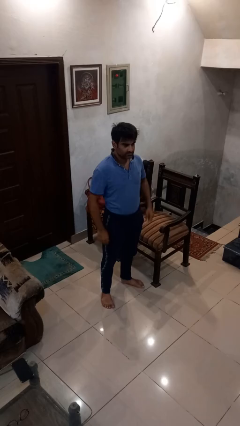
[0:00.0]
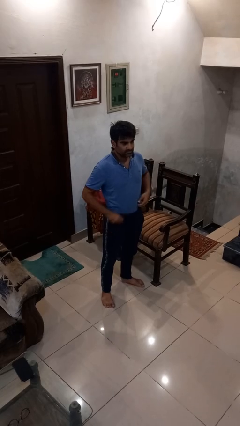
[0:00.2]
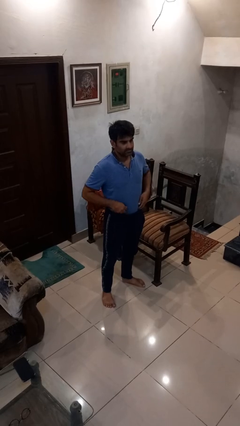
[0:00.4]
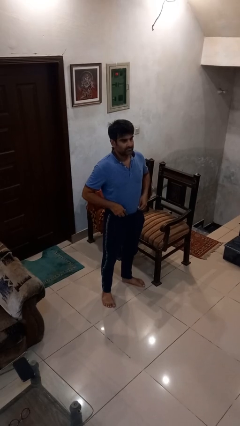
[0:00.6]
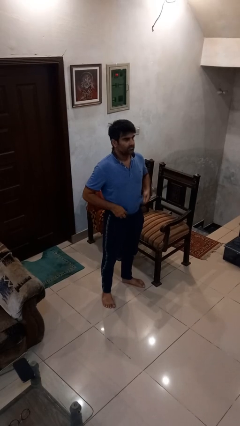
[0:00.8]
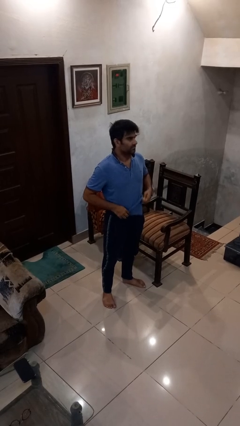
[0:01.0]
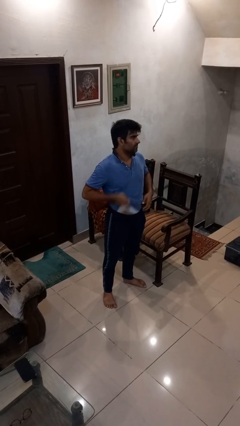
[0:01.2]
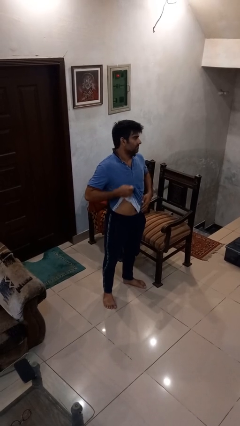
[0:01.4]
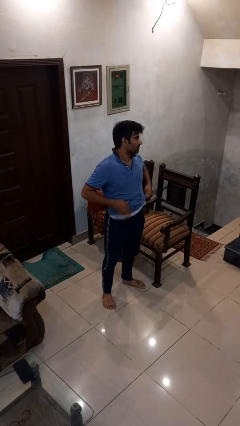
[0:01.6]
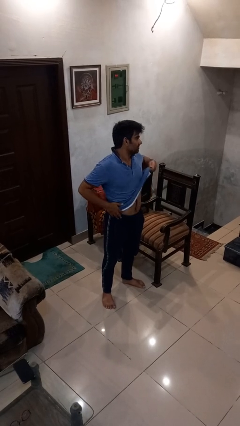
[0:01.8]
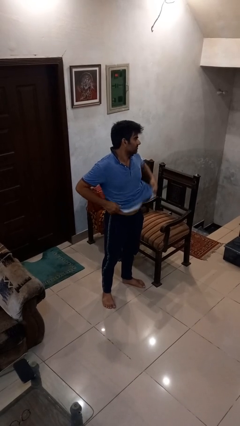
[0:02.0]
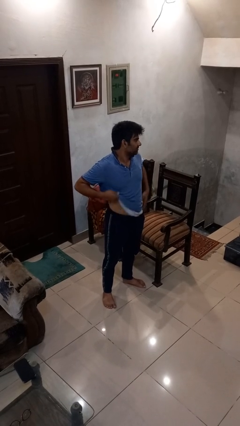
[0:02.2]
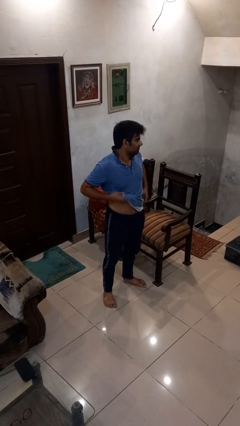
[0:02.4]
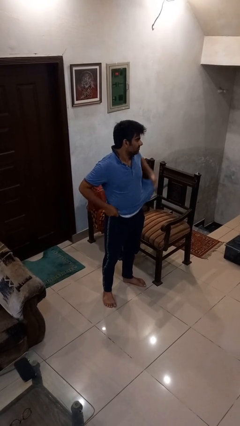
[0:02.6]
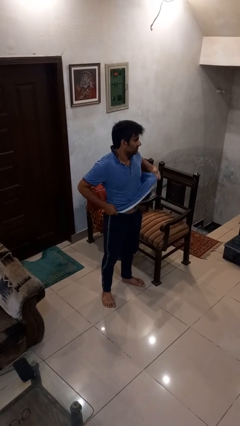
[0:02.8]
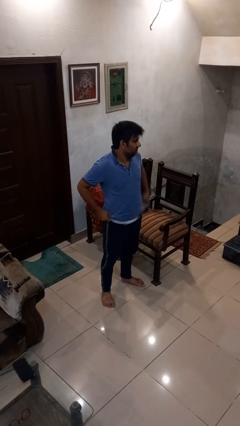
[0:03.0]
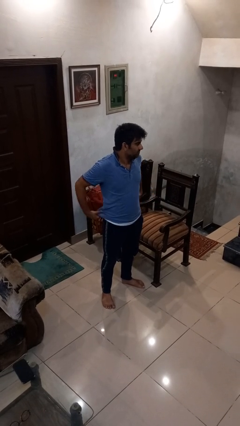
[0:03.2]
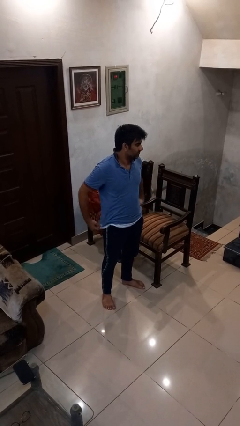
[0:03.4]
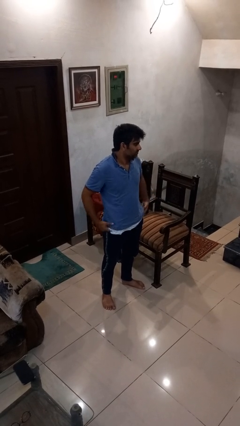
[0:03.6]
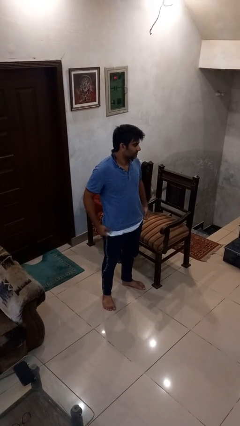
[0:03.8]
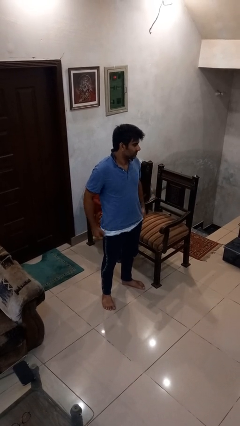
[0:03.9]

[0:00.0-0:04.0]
person untucks shirt

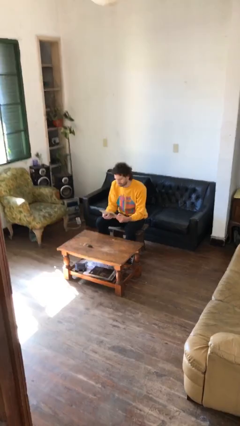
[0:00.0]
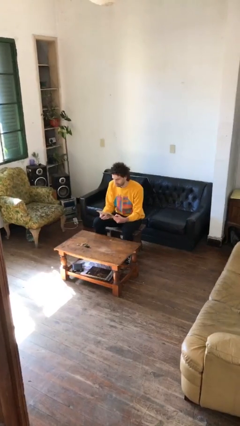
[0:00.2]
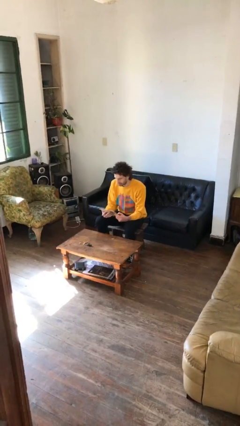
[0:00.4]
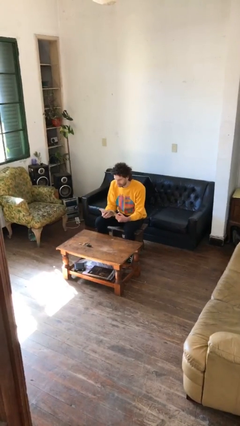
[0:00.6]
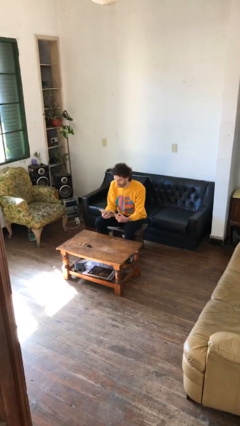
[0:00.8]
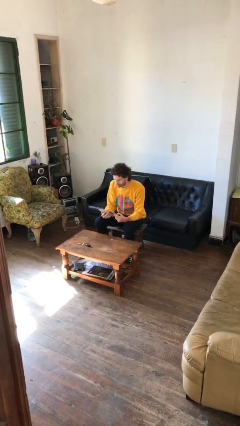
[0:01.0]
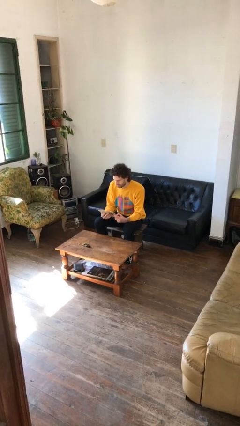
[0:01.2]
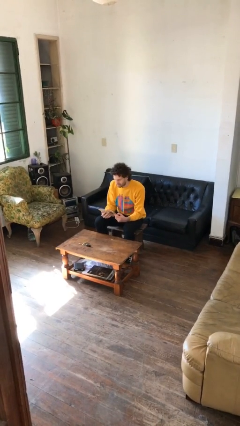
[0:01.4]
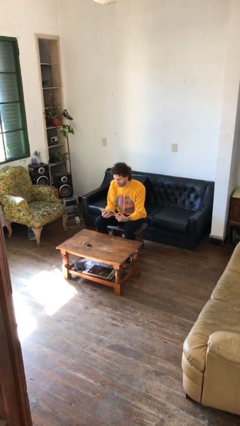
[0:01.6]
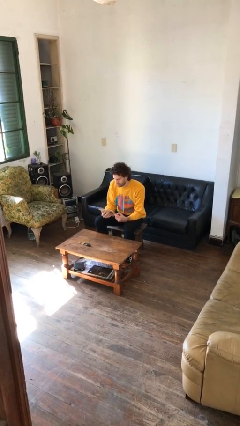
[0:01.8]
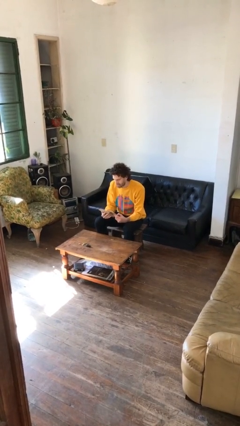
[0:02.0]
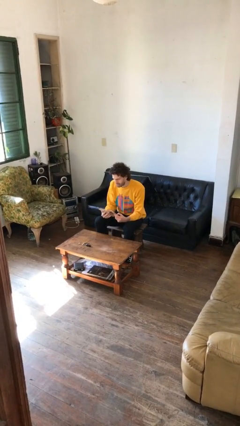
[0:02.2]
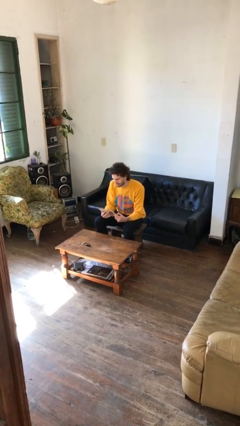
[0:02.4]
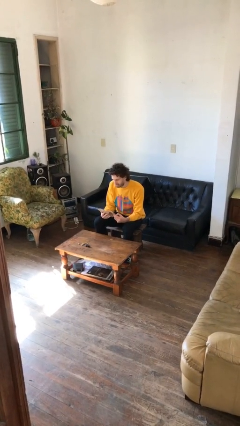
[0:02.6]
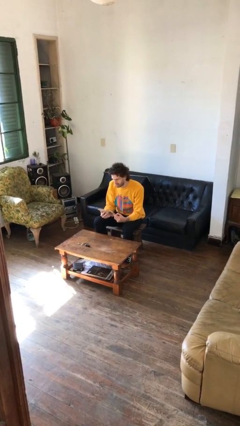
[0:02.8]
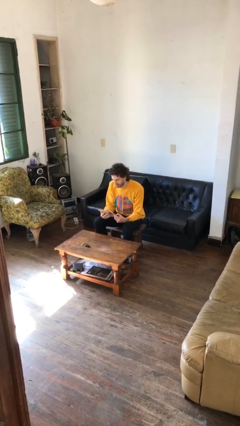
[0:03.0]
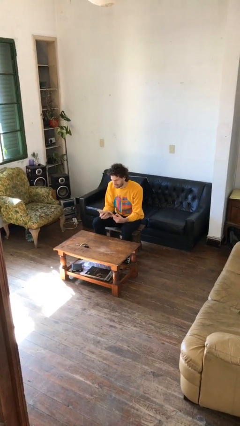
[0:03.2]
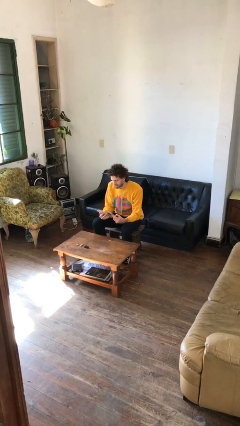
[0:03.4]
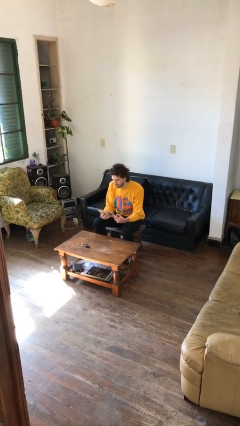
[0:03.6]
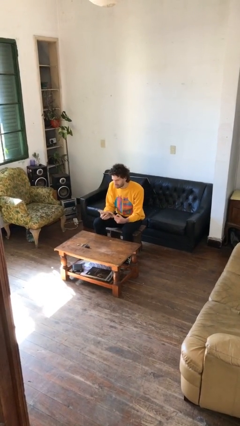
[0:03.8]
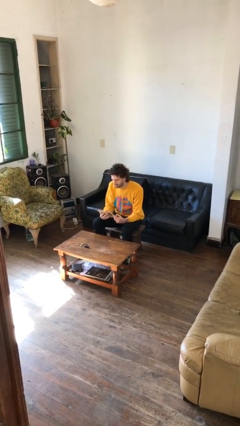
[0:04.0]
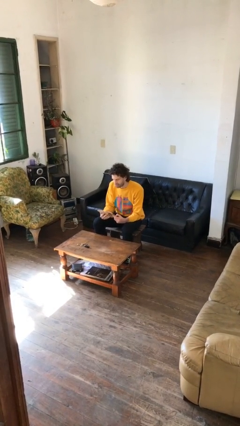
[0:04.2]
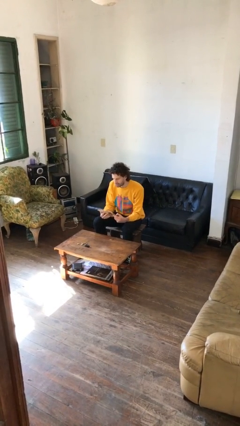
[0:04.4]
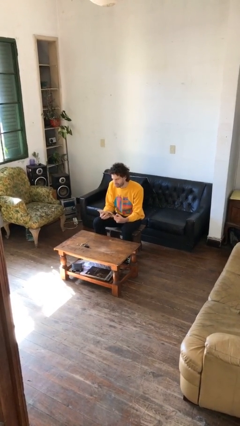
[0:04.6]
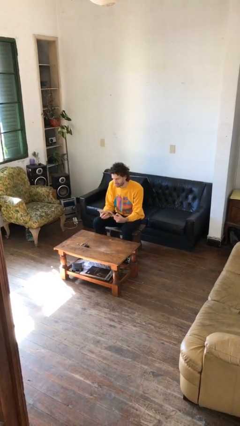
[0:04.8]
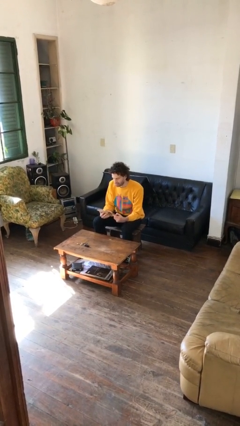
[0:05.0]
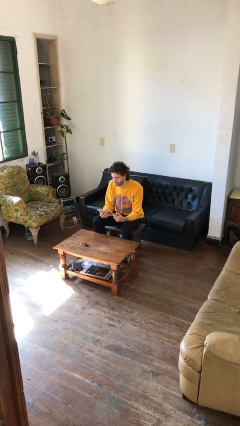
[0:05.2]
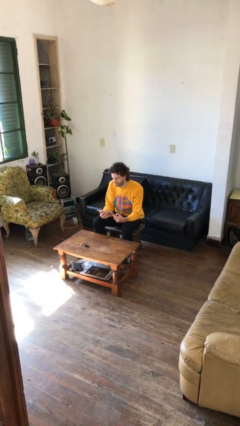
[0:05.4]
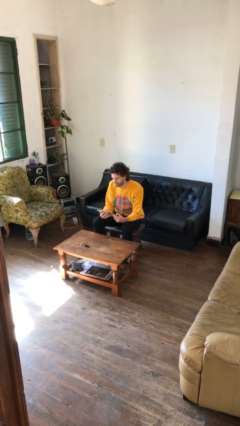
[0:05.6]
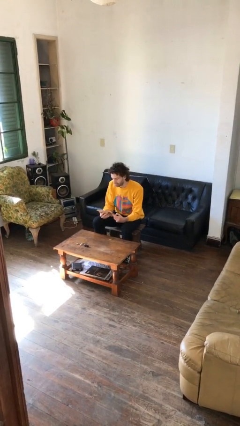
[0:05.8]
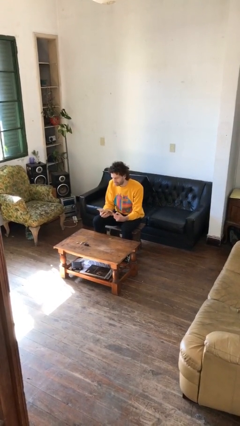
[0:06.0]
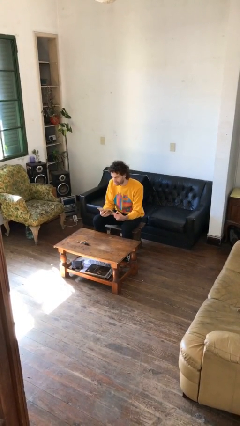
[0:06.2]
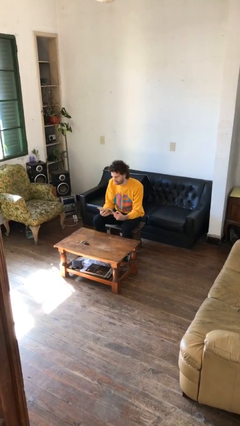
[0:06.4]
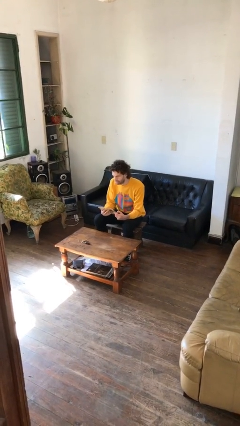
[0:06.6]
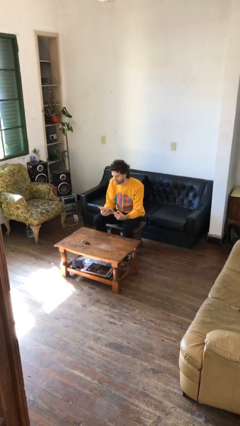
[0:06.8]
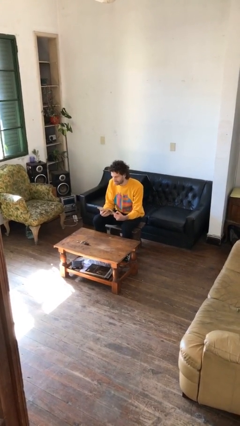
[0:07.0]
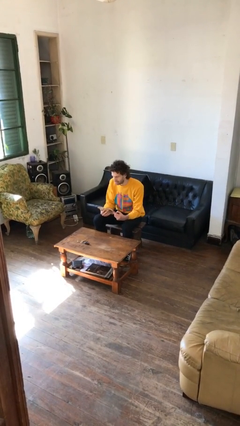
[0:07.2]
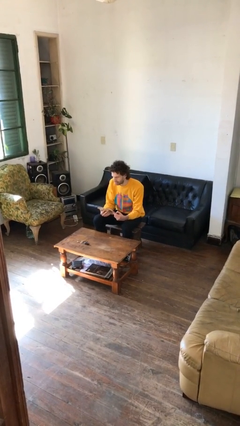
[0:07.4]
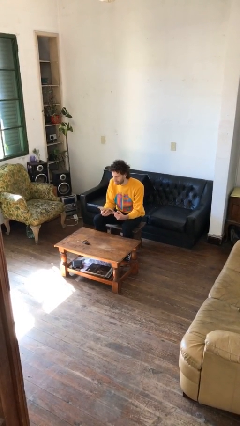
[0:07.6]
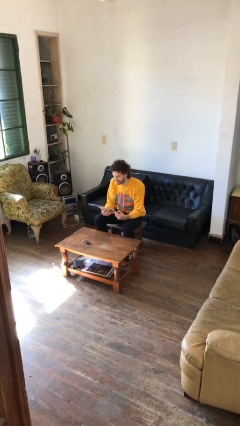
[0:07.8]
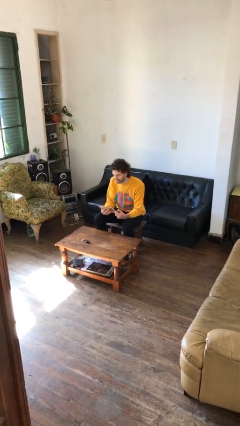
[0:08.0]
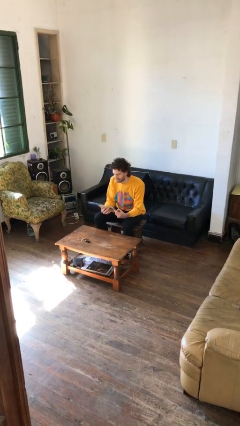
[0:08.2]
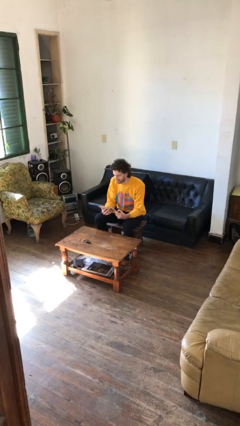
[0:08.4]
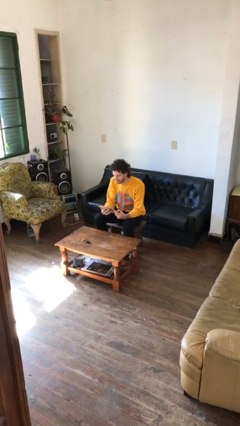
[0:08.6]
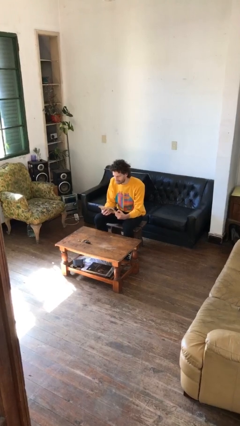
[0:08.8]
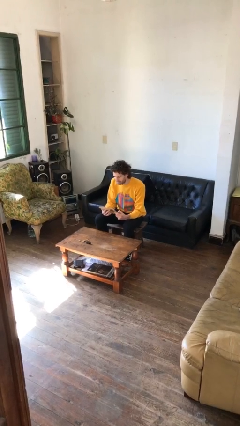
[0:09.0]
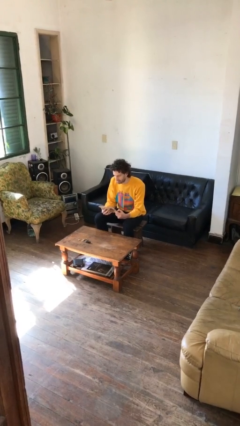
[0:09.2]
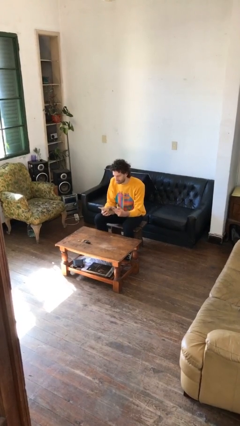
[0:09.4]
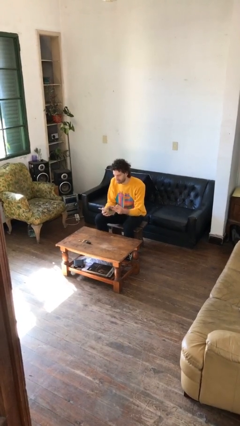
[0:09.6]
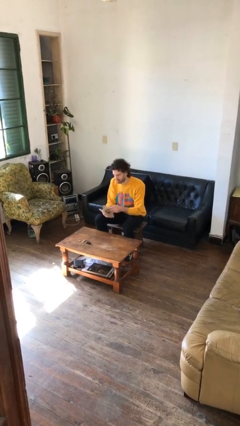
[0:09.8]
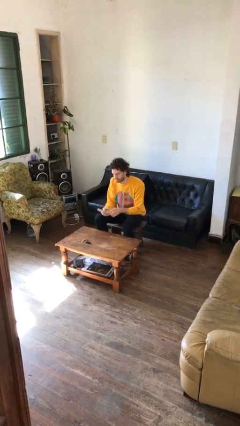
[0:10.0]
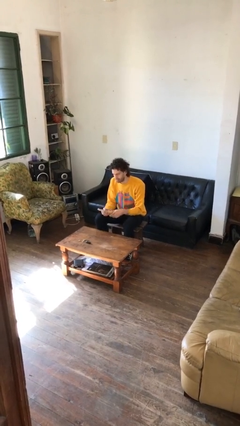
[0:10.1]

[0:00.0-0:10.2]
person reads document

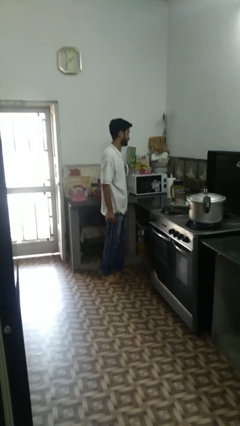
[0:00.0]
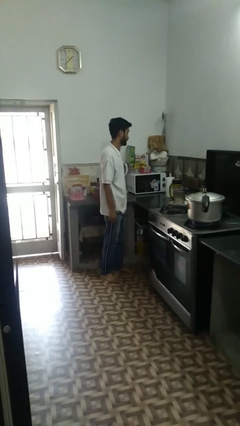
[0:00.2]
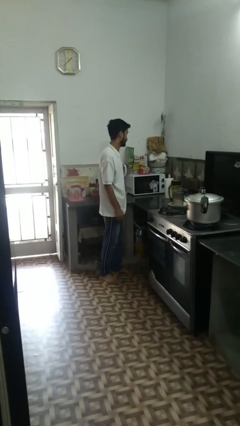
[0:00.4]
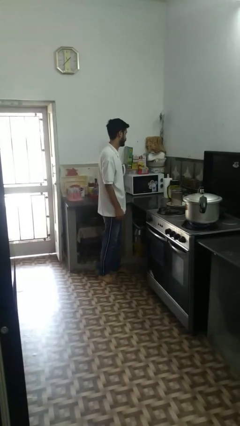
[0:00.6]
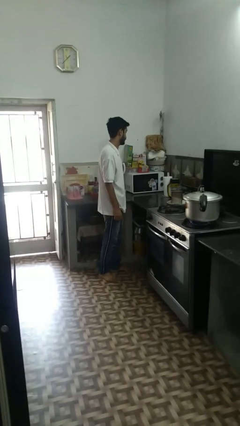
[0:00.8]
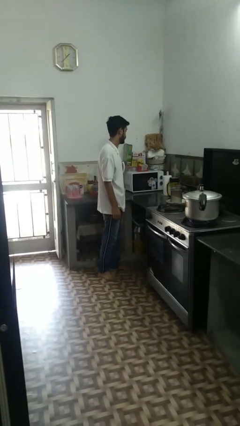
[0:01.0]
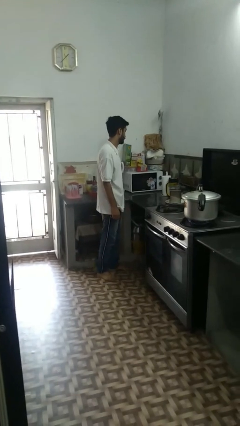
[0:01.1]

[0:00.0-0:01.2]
person closes microwave

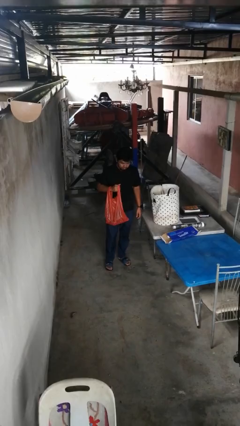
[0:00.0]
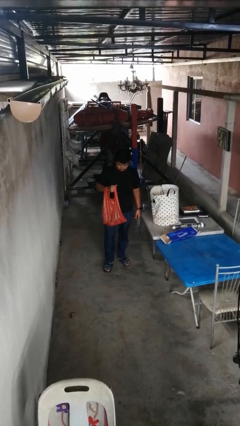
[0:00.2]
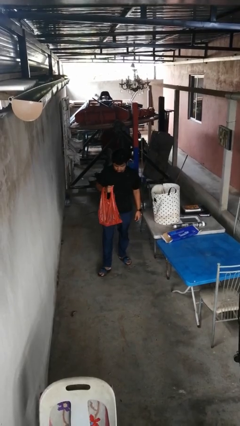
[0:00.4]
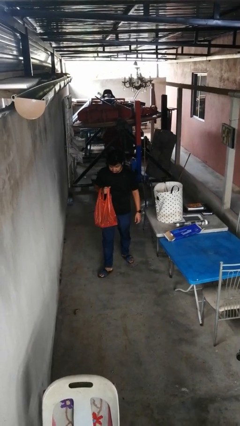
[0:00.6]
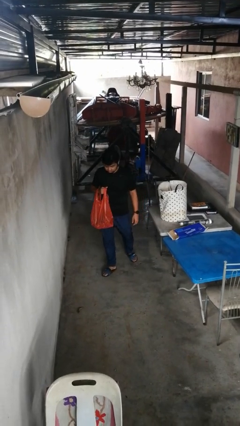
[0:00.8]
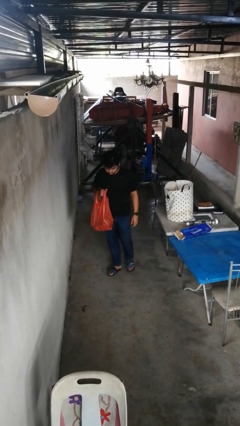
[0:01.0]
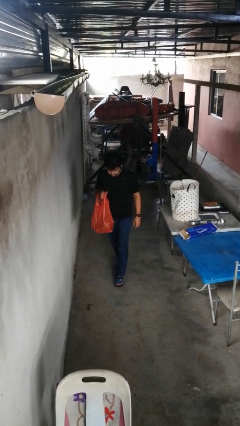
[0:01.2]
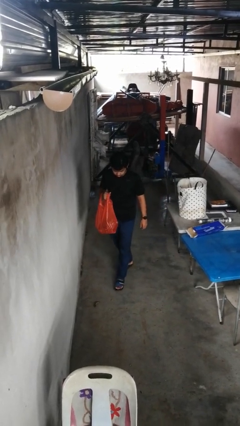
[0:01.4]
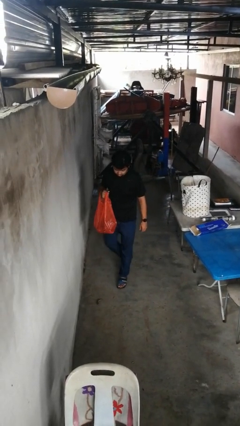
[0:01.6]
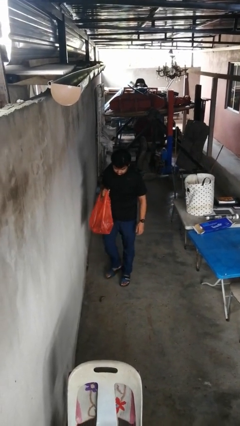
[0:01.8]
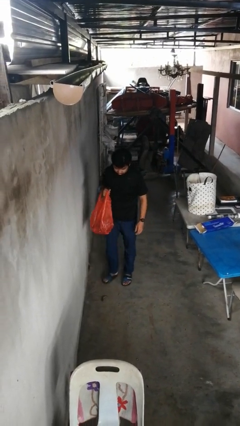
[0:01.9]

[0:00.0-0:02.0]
person carries groceries

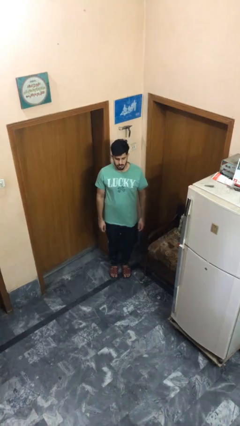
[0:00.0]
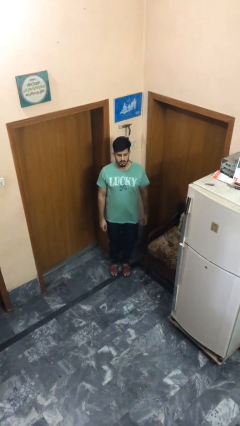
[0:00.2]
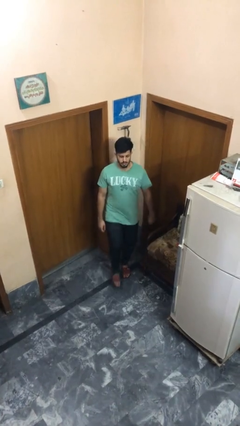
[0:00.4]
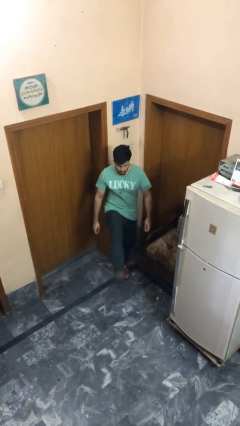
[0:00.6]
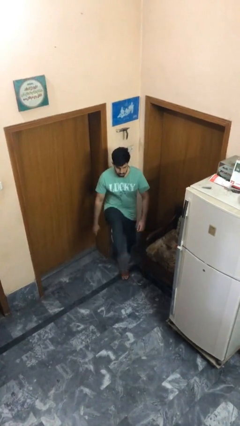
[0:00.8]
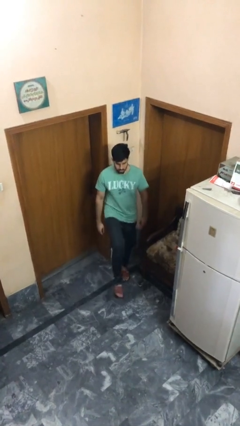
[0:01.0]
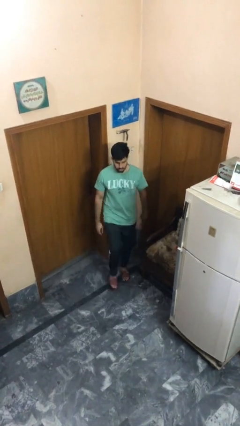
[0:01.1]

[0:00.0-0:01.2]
person karate kicks
